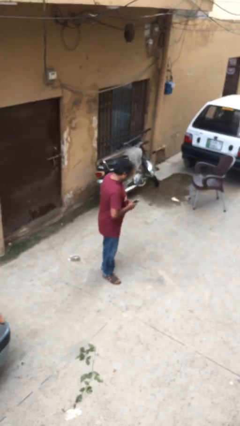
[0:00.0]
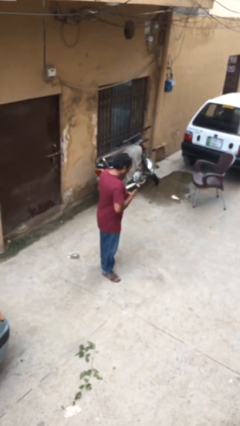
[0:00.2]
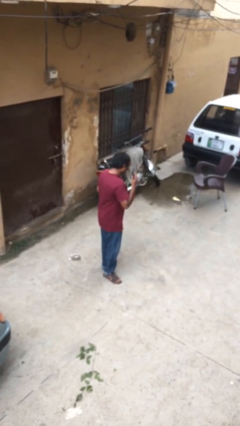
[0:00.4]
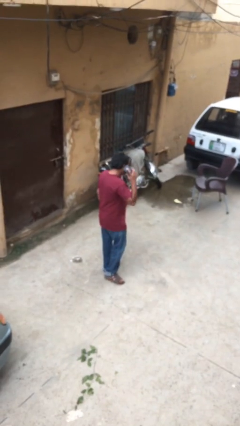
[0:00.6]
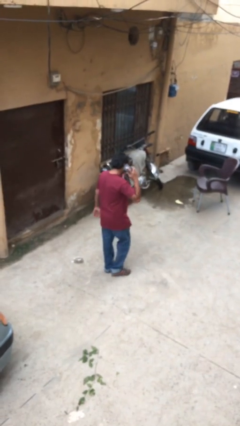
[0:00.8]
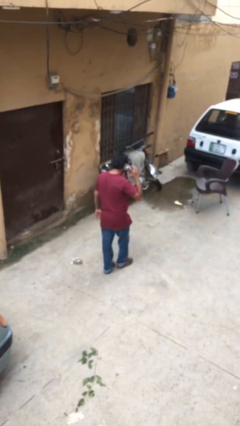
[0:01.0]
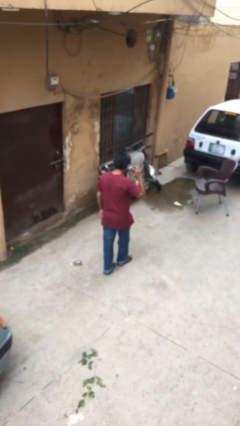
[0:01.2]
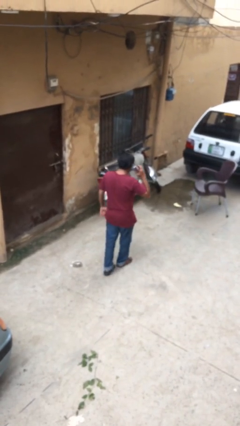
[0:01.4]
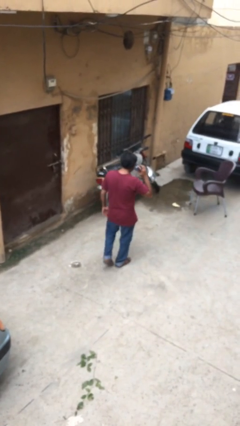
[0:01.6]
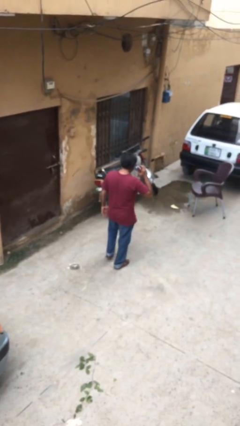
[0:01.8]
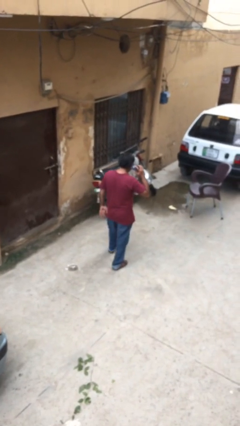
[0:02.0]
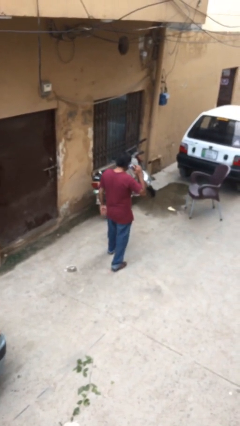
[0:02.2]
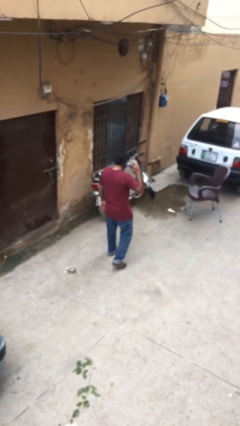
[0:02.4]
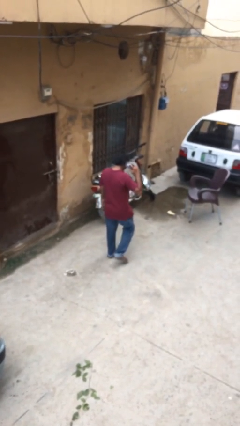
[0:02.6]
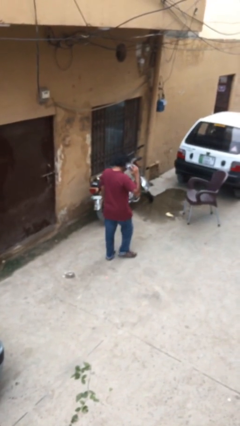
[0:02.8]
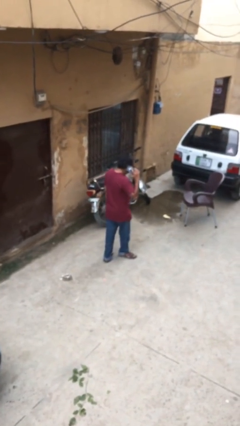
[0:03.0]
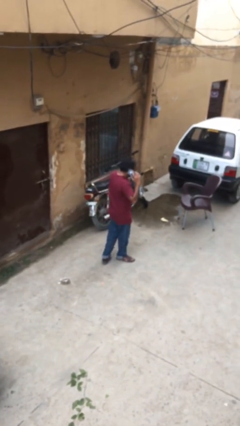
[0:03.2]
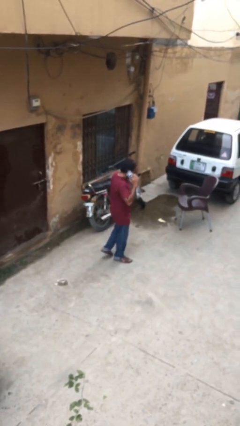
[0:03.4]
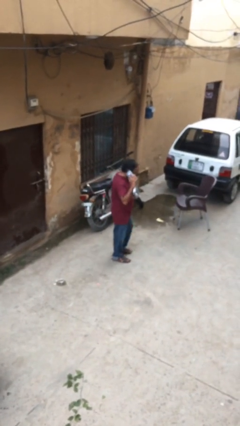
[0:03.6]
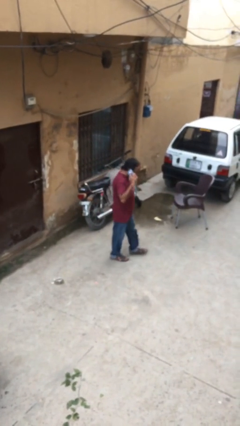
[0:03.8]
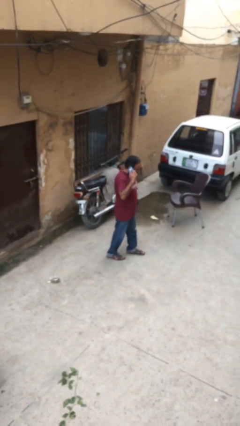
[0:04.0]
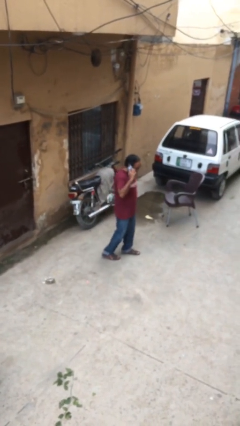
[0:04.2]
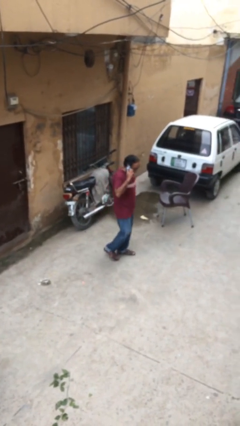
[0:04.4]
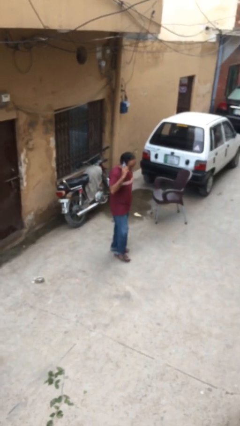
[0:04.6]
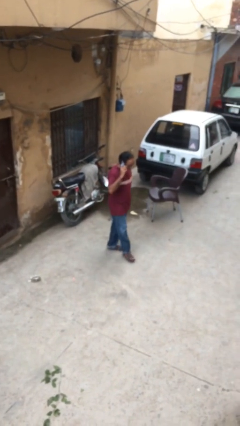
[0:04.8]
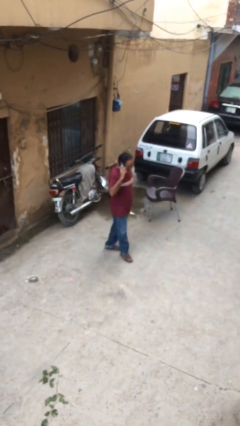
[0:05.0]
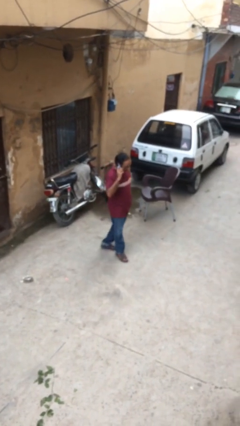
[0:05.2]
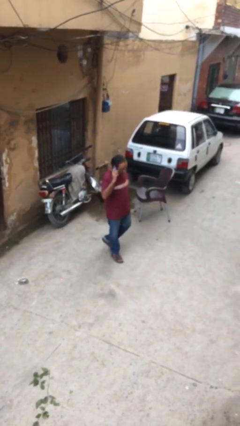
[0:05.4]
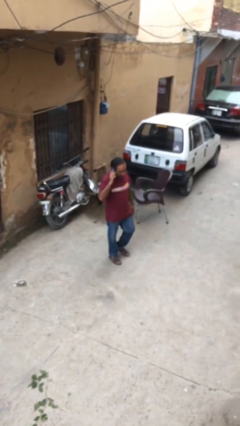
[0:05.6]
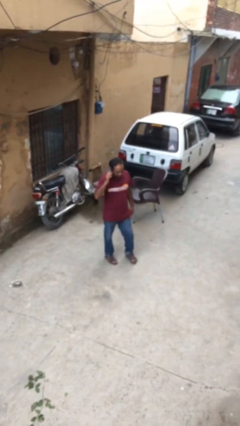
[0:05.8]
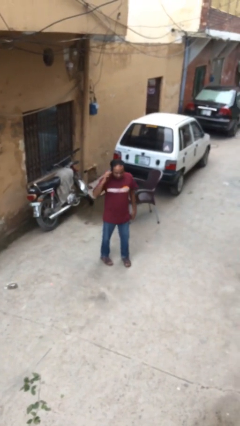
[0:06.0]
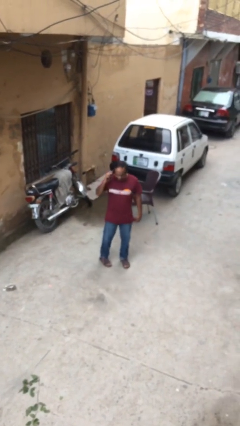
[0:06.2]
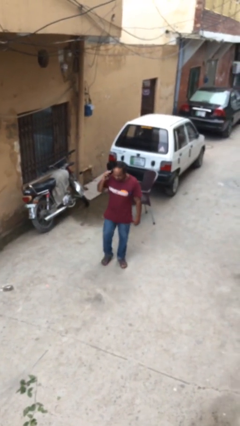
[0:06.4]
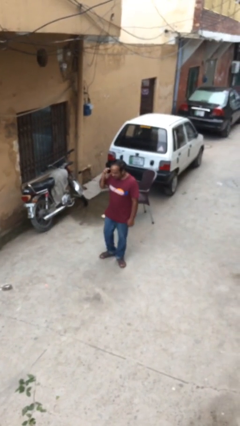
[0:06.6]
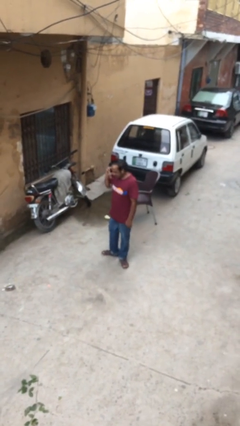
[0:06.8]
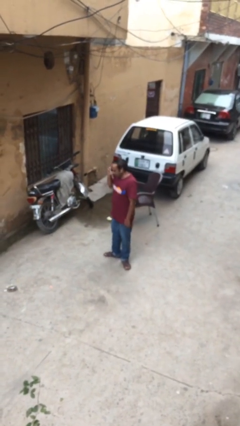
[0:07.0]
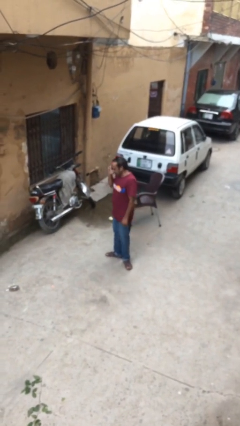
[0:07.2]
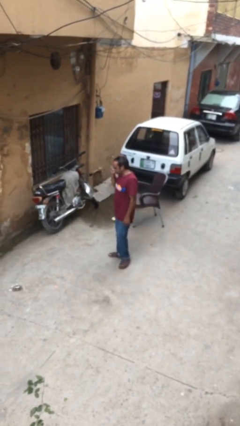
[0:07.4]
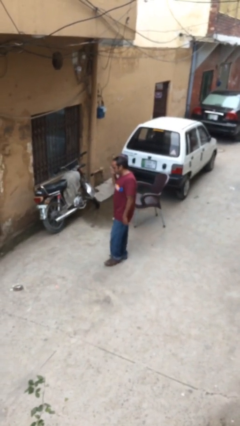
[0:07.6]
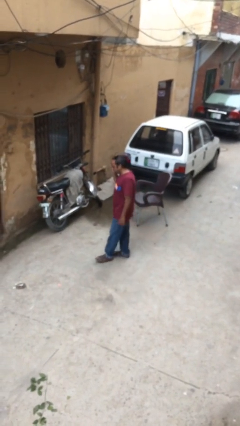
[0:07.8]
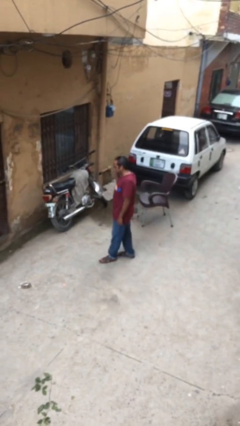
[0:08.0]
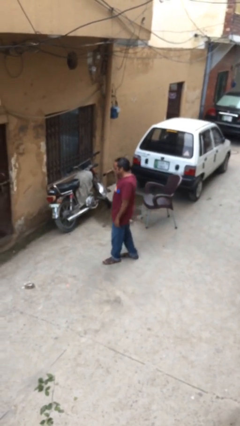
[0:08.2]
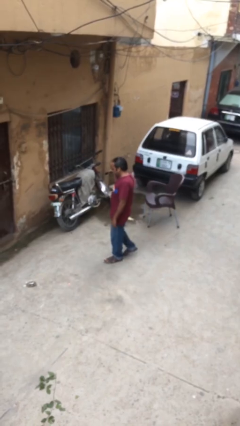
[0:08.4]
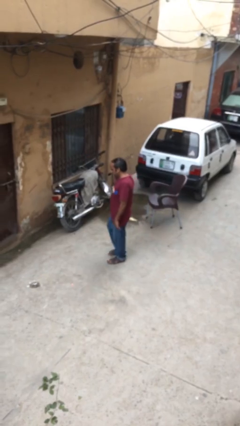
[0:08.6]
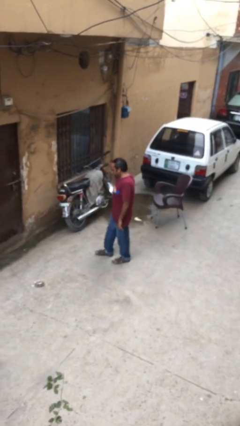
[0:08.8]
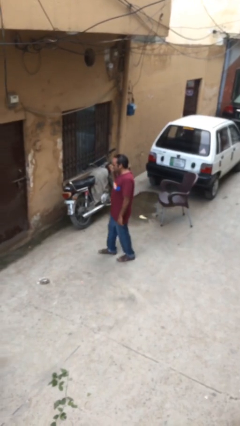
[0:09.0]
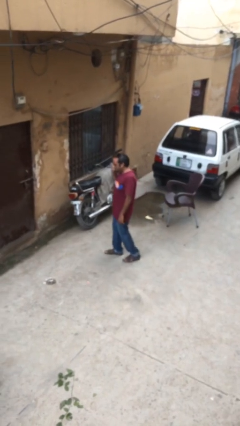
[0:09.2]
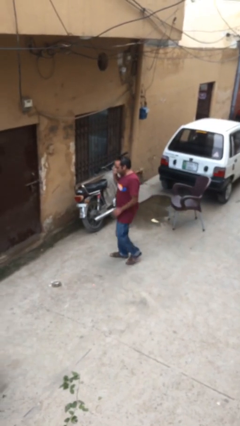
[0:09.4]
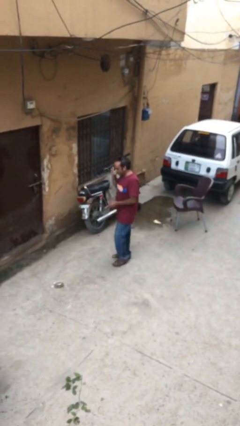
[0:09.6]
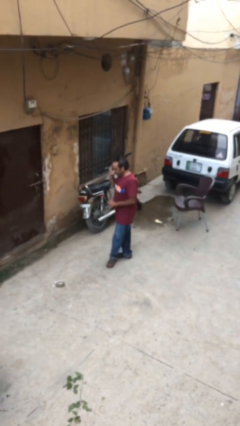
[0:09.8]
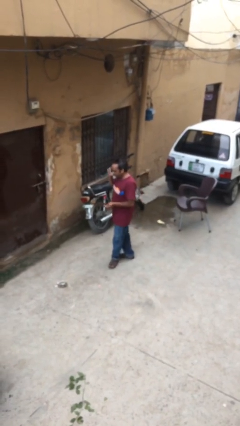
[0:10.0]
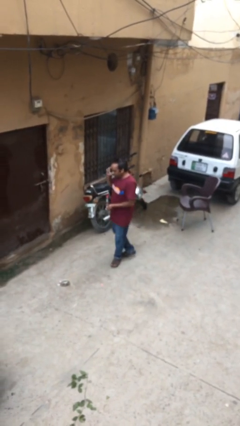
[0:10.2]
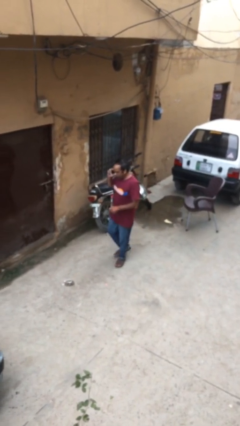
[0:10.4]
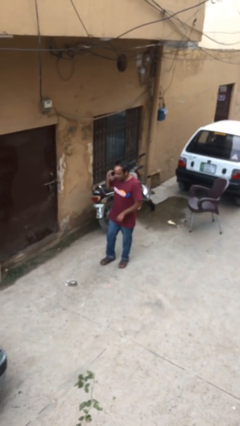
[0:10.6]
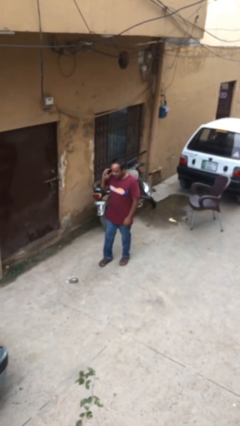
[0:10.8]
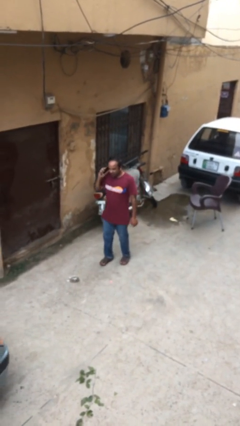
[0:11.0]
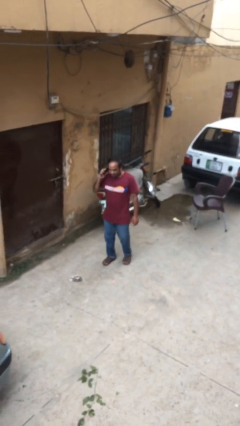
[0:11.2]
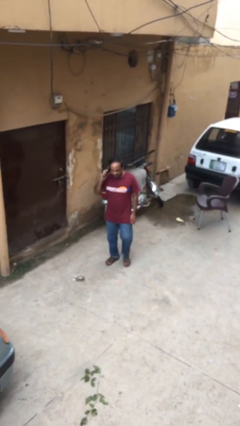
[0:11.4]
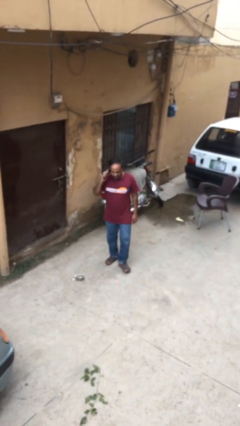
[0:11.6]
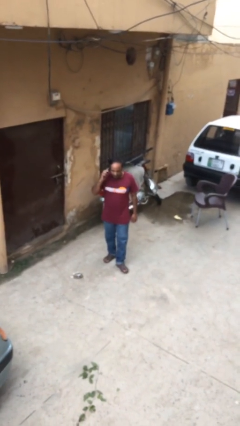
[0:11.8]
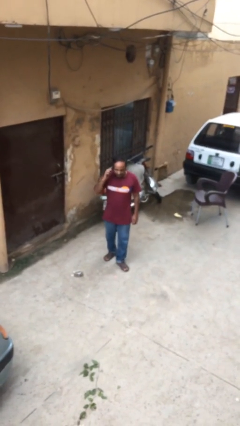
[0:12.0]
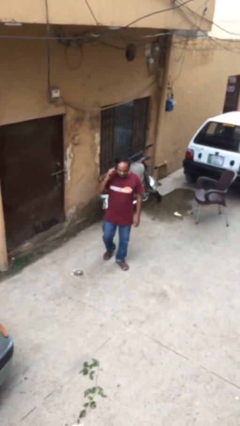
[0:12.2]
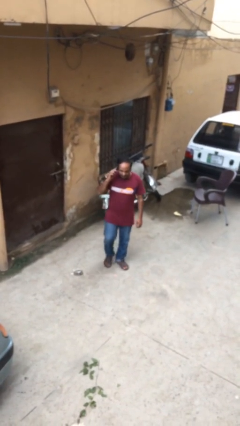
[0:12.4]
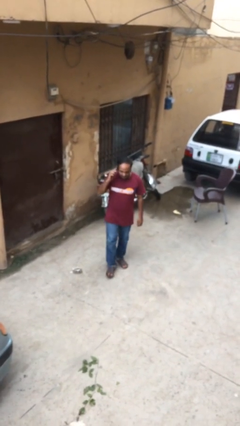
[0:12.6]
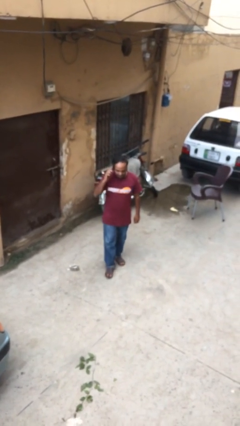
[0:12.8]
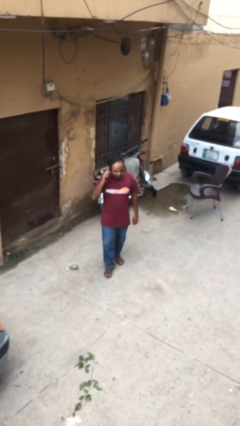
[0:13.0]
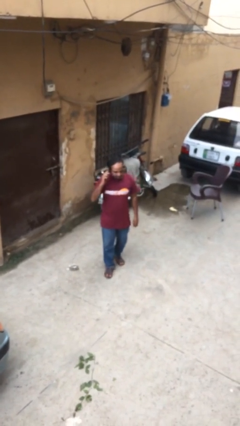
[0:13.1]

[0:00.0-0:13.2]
person talks on phone

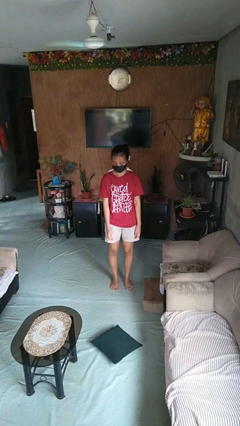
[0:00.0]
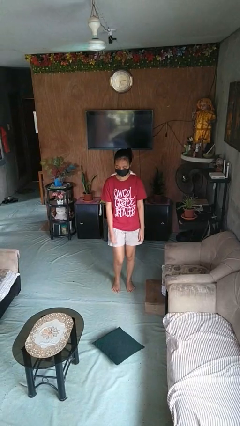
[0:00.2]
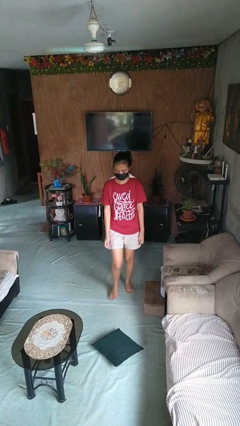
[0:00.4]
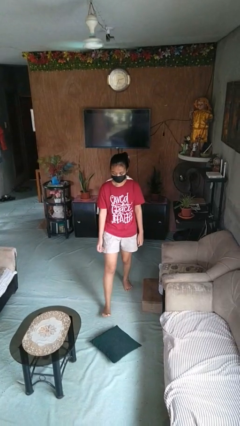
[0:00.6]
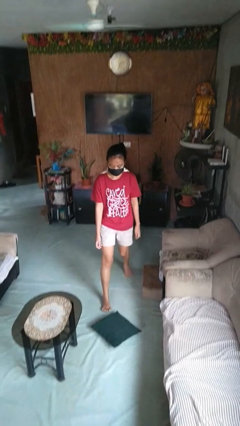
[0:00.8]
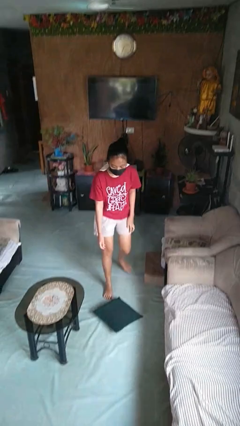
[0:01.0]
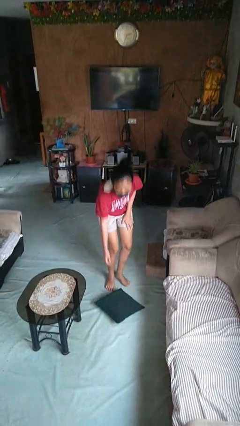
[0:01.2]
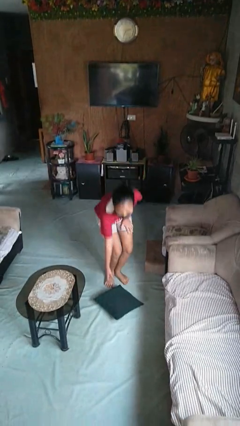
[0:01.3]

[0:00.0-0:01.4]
person picks up object from floor

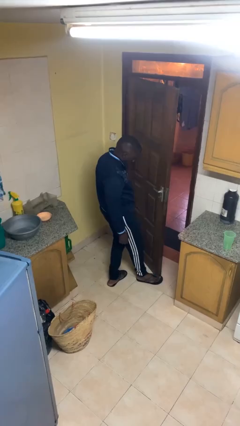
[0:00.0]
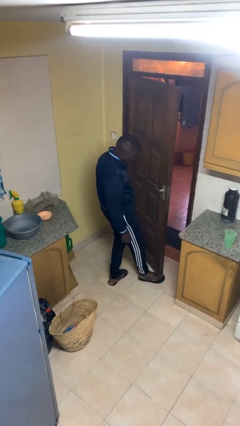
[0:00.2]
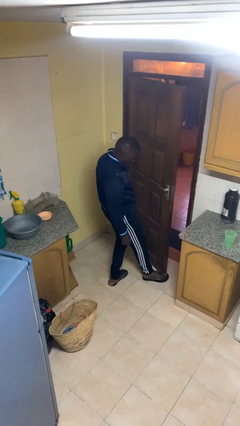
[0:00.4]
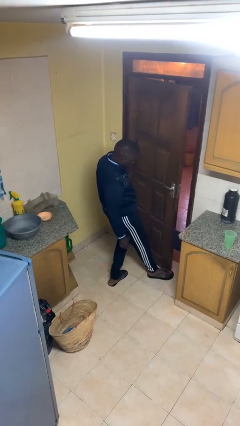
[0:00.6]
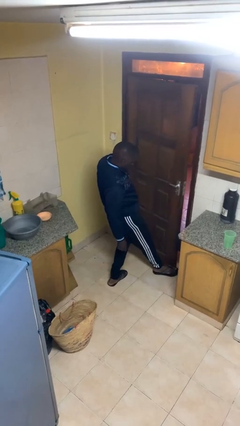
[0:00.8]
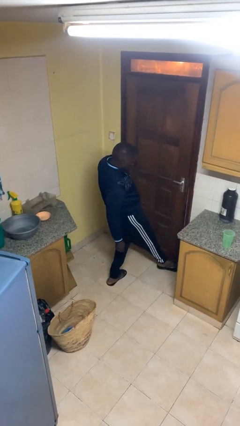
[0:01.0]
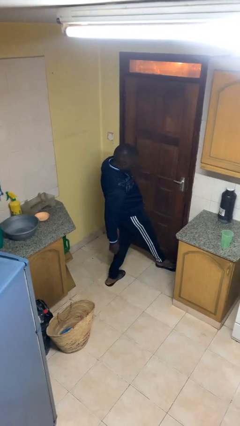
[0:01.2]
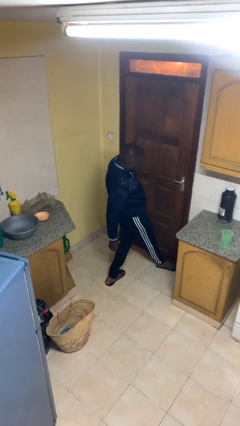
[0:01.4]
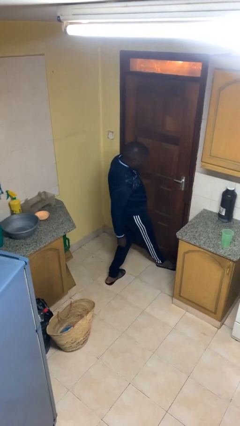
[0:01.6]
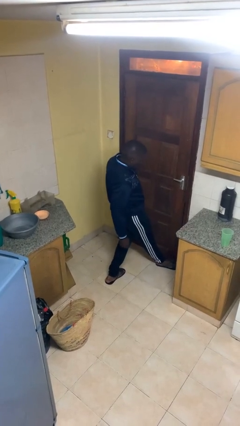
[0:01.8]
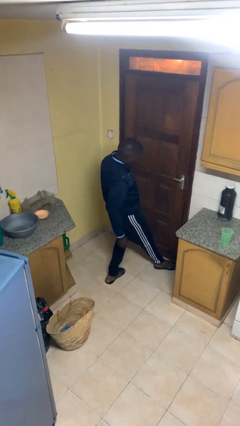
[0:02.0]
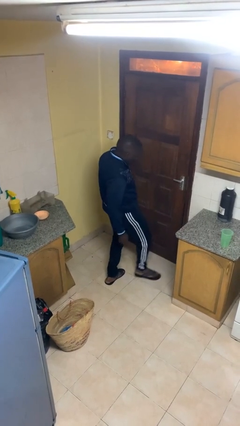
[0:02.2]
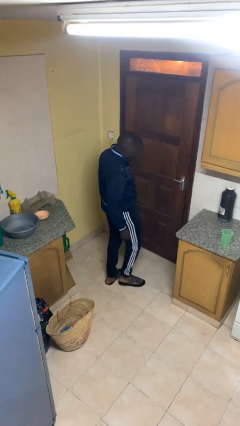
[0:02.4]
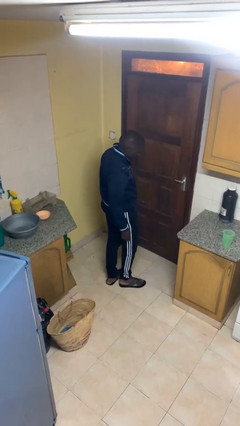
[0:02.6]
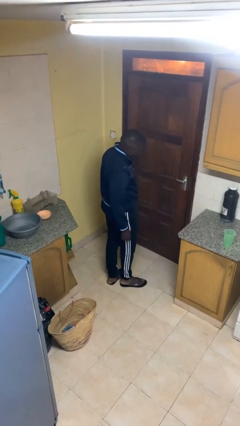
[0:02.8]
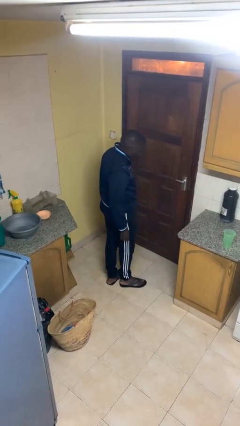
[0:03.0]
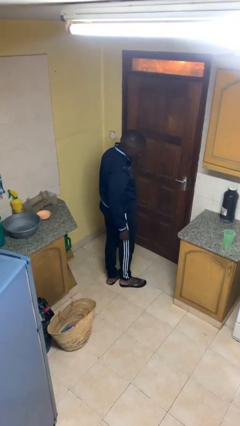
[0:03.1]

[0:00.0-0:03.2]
person closes door with foot

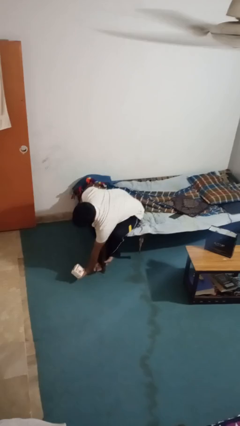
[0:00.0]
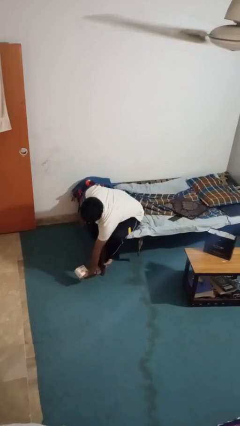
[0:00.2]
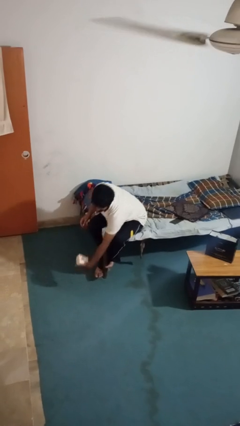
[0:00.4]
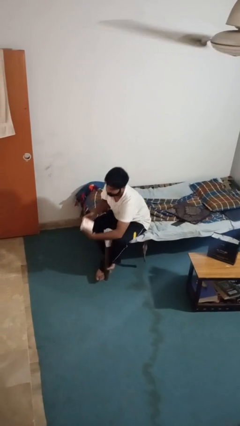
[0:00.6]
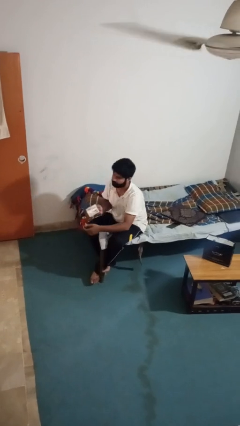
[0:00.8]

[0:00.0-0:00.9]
person catches dropped object
